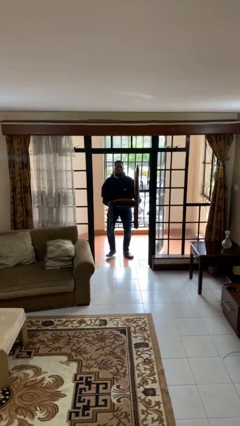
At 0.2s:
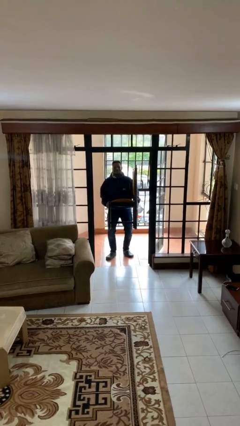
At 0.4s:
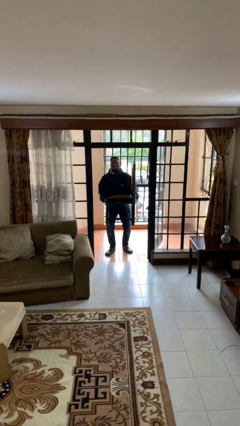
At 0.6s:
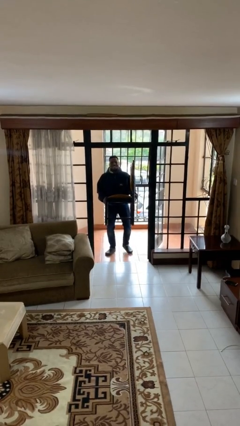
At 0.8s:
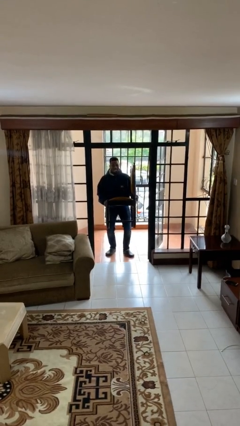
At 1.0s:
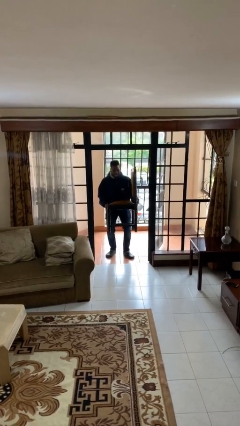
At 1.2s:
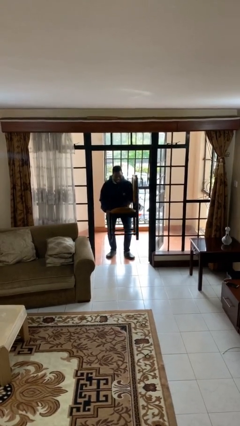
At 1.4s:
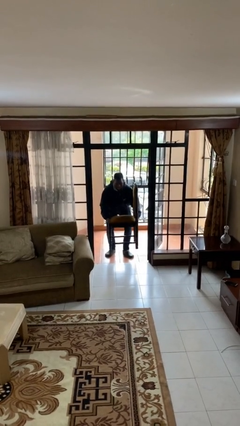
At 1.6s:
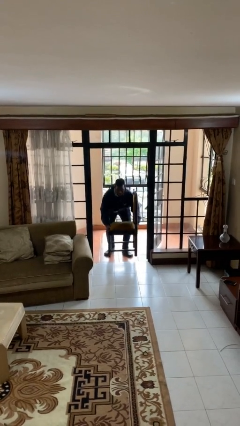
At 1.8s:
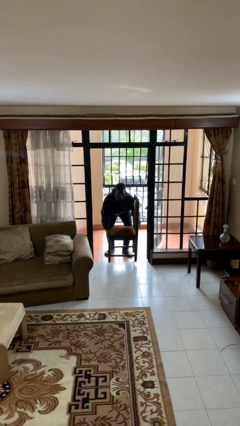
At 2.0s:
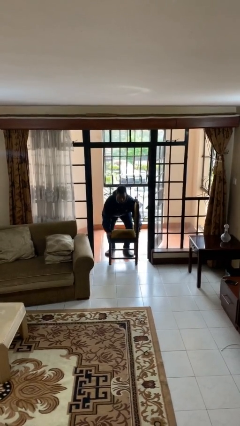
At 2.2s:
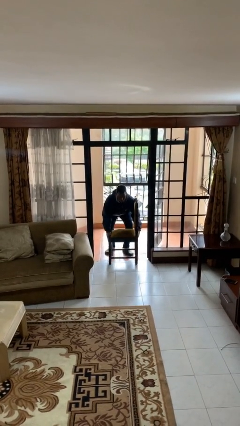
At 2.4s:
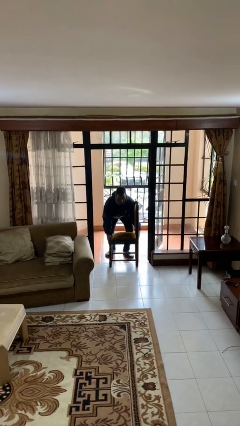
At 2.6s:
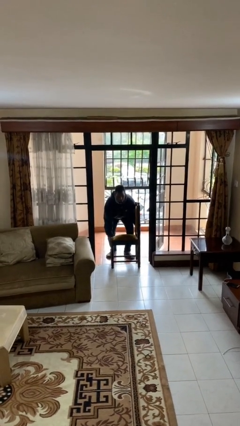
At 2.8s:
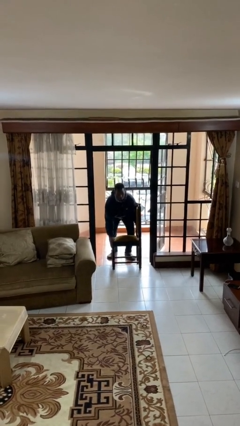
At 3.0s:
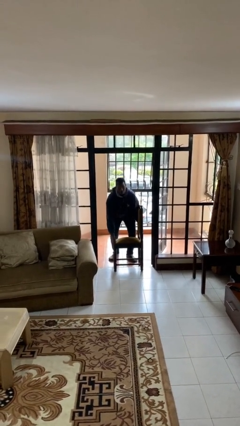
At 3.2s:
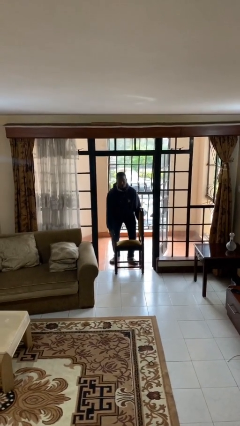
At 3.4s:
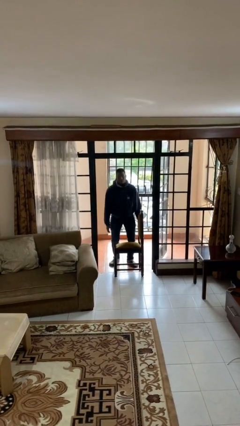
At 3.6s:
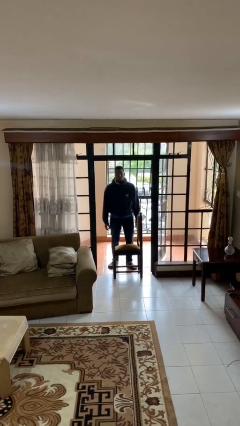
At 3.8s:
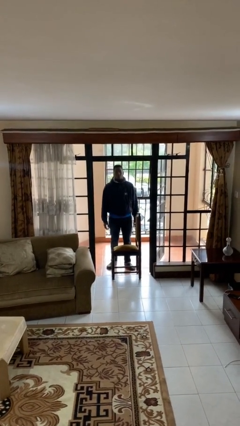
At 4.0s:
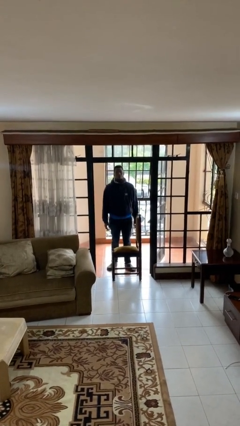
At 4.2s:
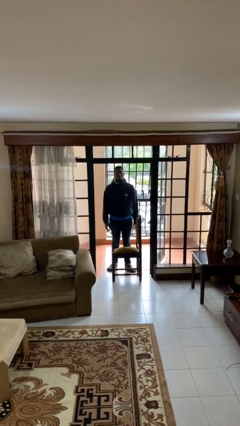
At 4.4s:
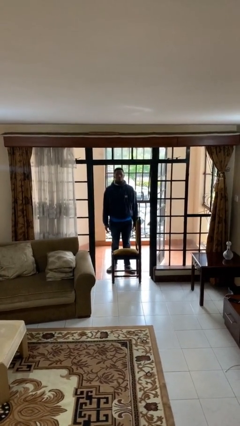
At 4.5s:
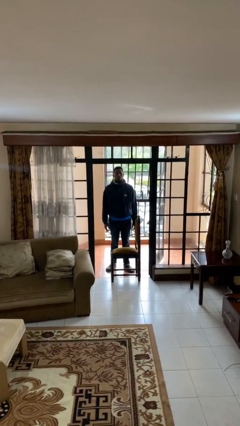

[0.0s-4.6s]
person puts down object on floor

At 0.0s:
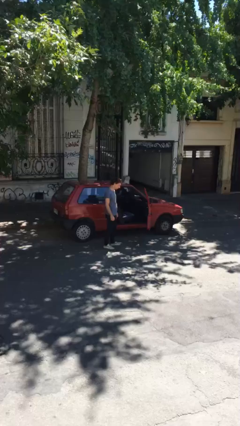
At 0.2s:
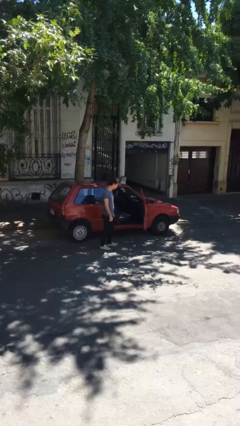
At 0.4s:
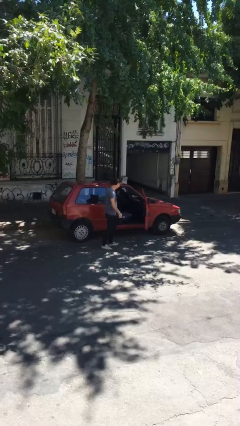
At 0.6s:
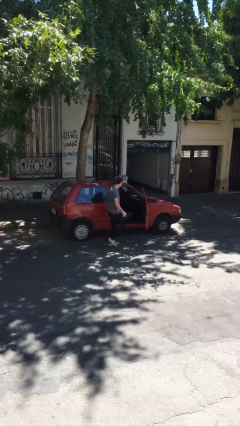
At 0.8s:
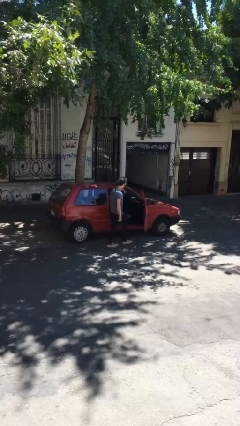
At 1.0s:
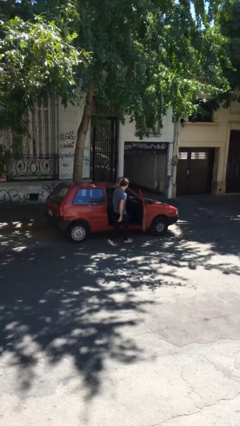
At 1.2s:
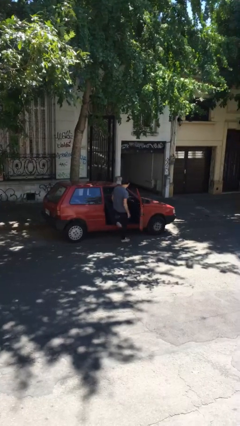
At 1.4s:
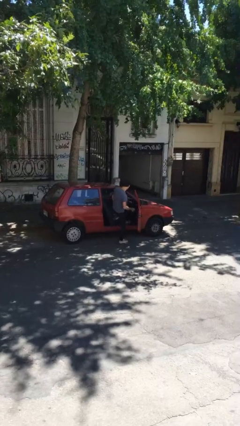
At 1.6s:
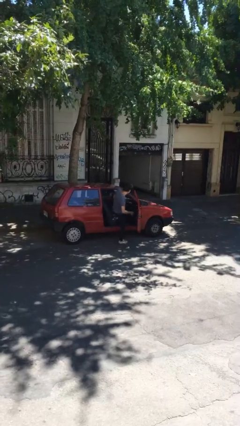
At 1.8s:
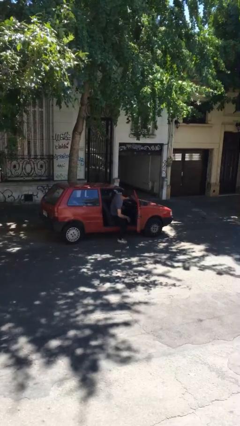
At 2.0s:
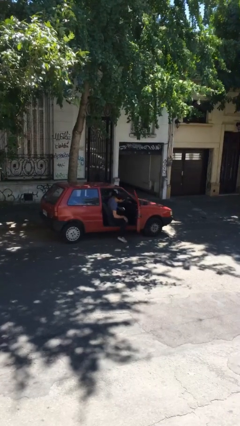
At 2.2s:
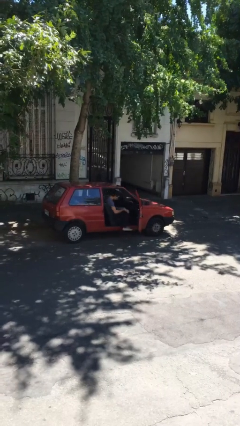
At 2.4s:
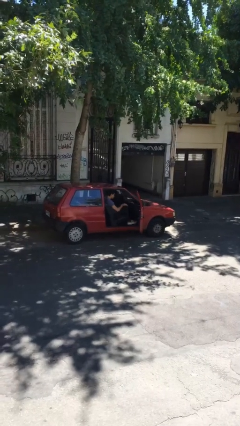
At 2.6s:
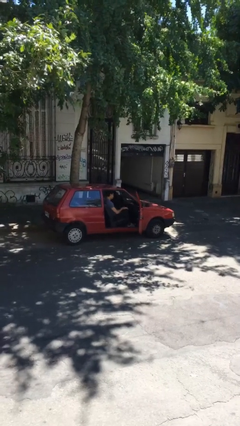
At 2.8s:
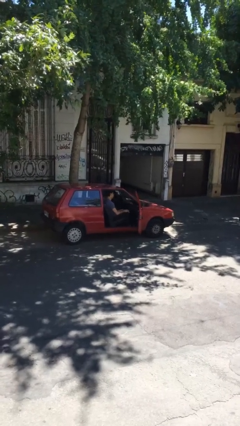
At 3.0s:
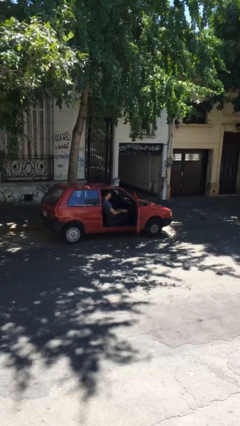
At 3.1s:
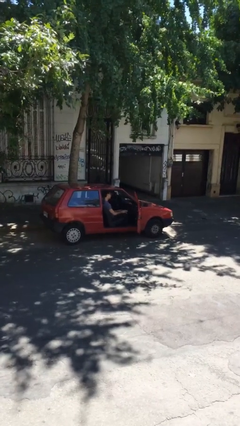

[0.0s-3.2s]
person enters car

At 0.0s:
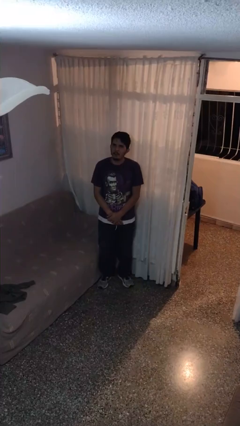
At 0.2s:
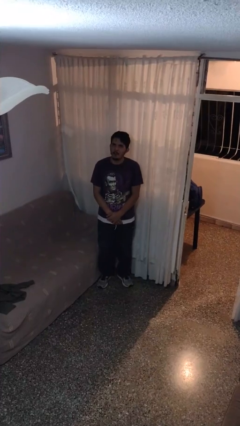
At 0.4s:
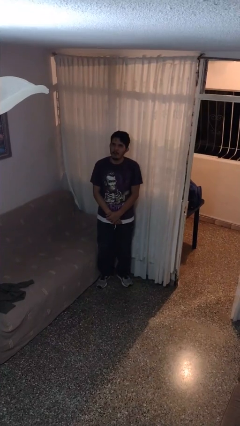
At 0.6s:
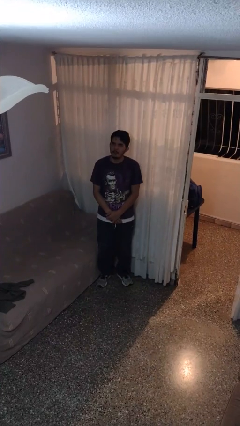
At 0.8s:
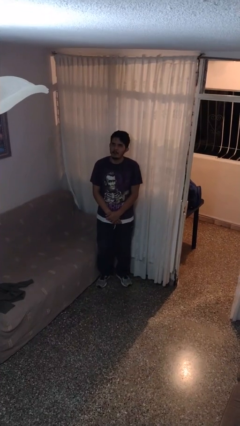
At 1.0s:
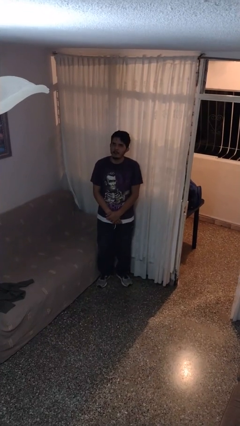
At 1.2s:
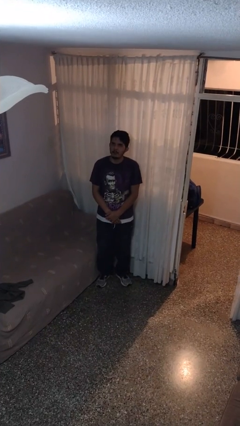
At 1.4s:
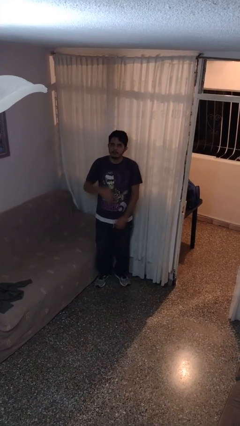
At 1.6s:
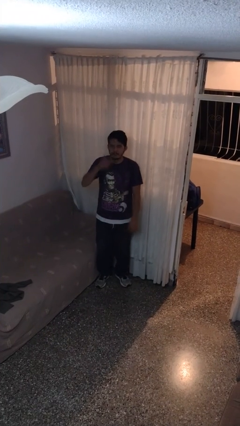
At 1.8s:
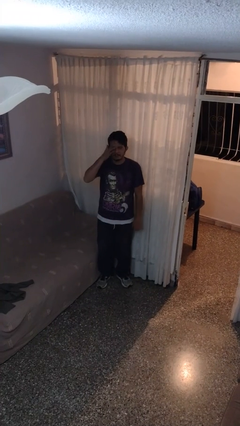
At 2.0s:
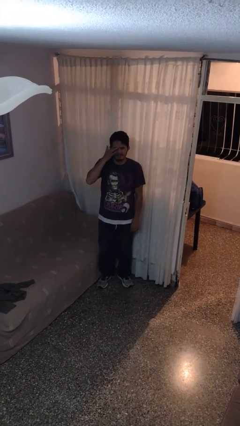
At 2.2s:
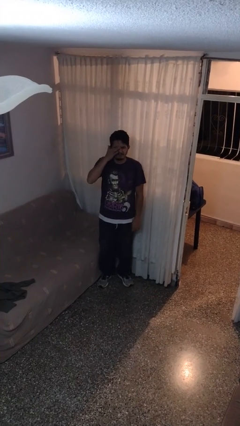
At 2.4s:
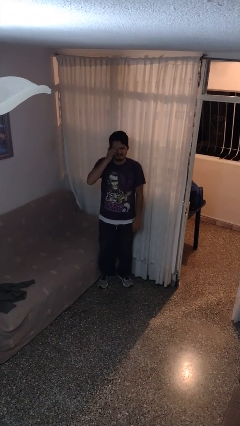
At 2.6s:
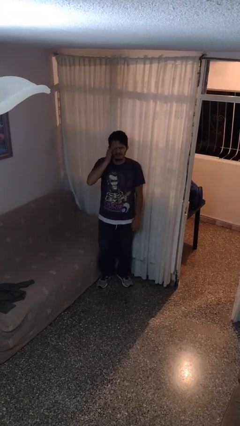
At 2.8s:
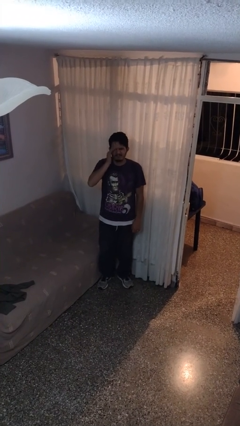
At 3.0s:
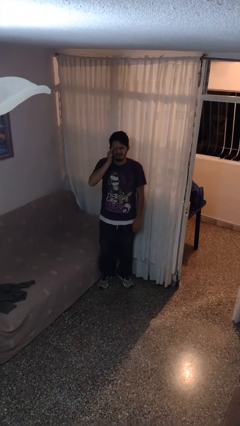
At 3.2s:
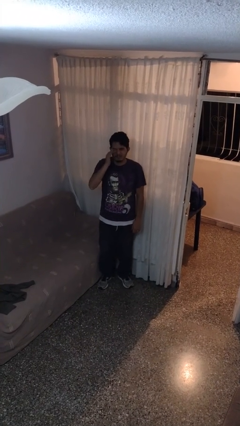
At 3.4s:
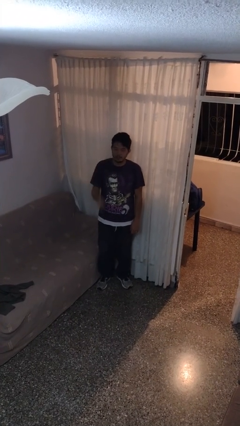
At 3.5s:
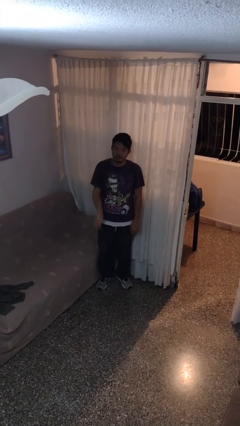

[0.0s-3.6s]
person rubs eyes

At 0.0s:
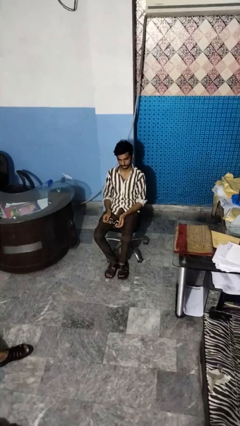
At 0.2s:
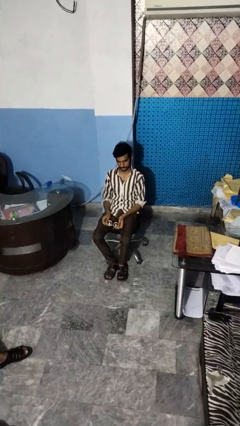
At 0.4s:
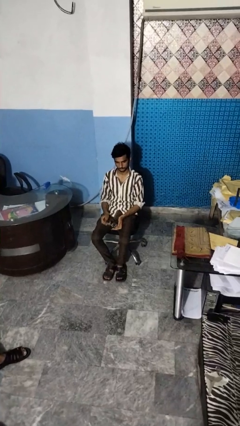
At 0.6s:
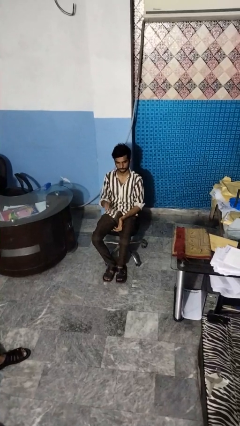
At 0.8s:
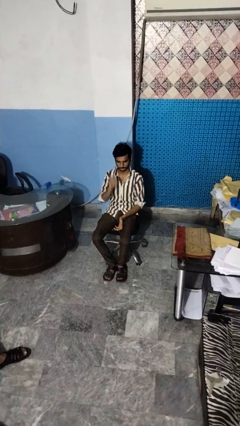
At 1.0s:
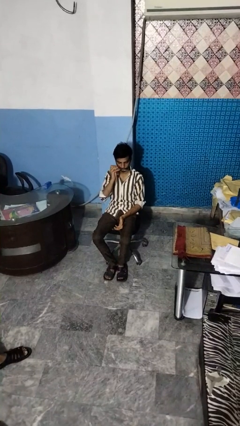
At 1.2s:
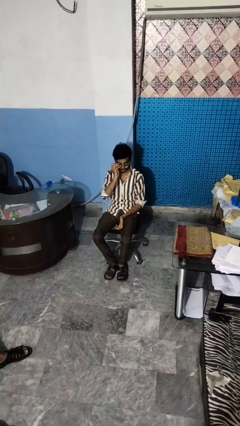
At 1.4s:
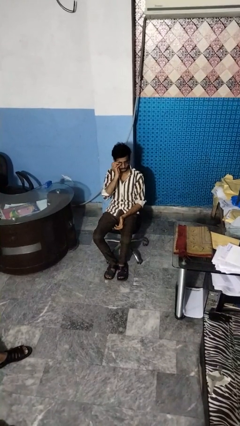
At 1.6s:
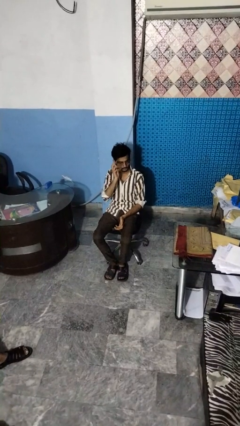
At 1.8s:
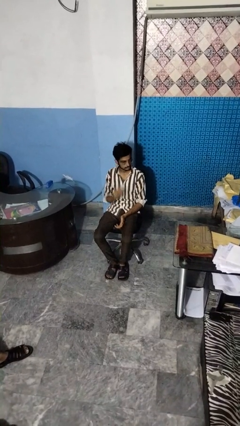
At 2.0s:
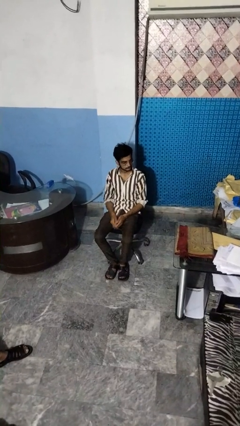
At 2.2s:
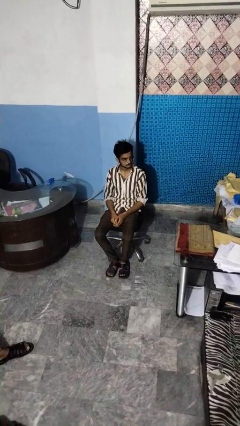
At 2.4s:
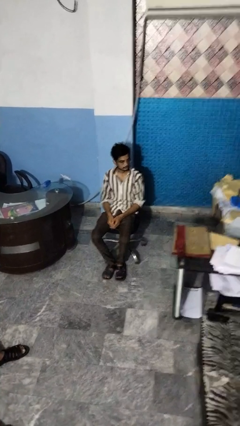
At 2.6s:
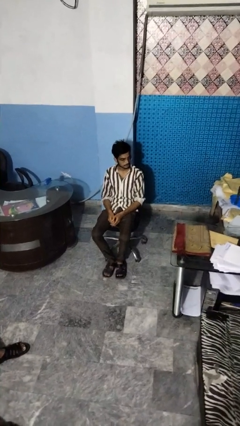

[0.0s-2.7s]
person puts on glasses

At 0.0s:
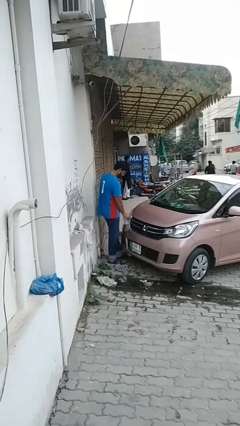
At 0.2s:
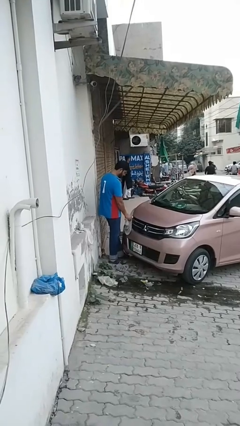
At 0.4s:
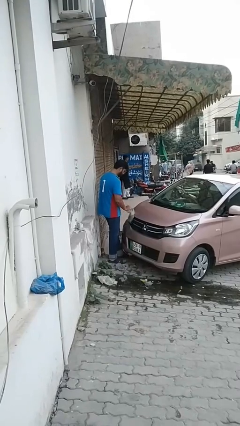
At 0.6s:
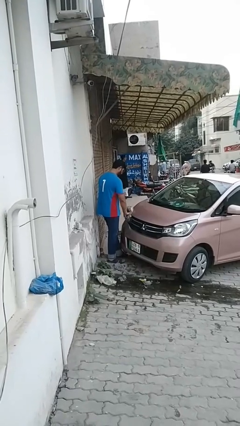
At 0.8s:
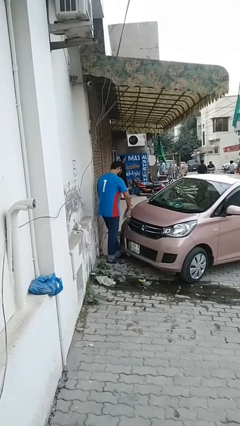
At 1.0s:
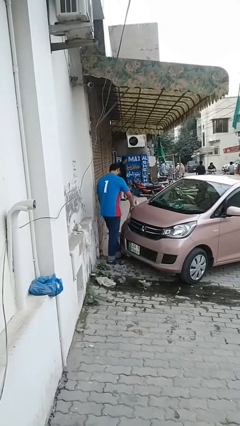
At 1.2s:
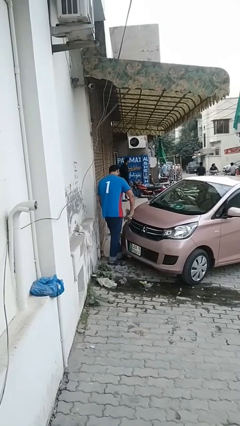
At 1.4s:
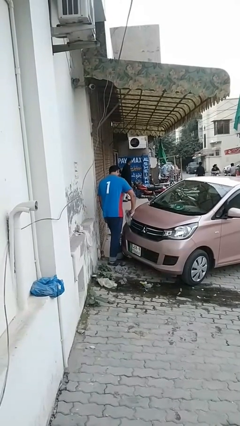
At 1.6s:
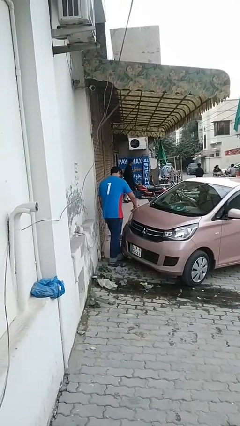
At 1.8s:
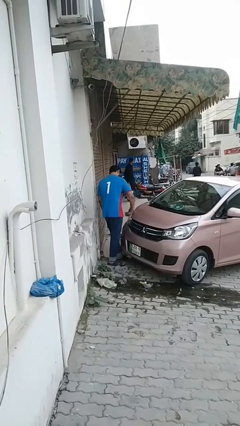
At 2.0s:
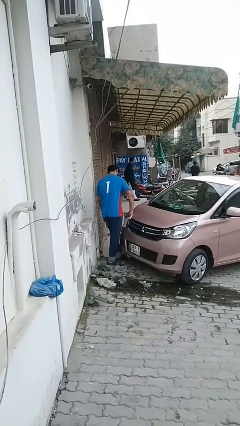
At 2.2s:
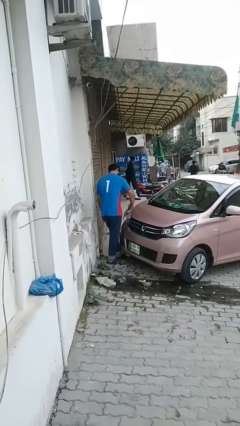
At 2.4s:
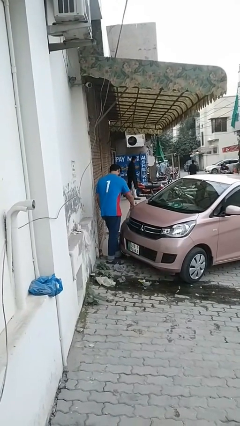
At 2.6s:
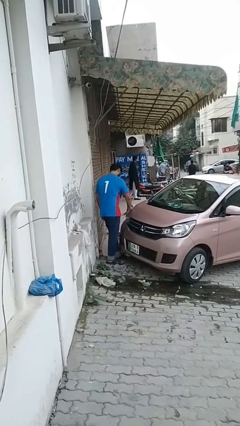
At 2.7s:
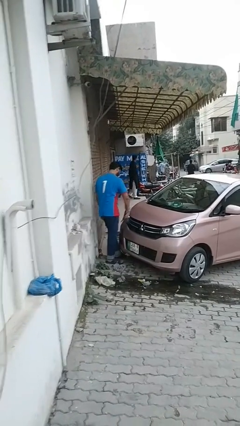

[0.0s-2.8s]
person polishes car with rag

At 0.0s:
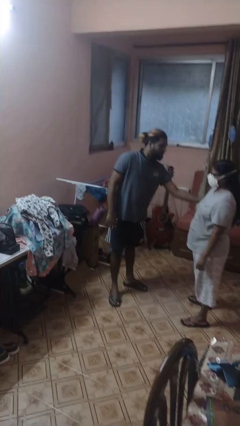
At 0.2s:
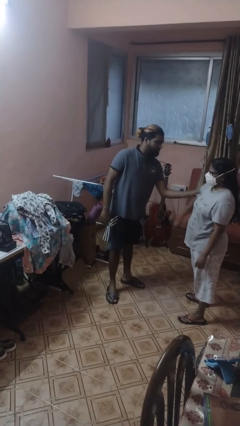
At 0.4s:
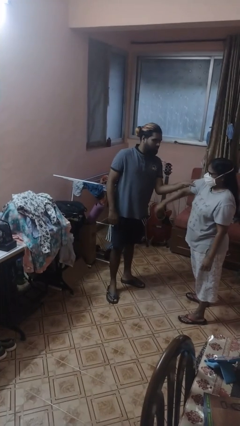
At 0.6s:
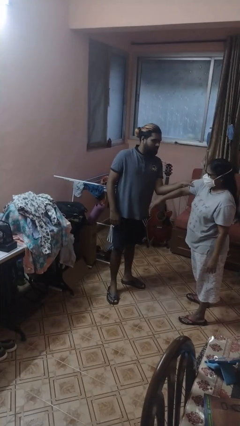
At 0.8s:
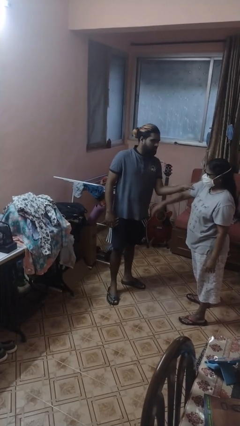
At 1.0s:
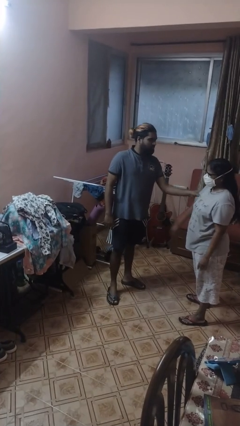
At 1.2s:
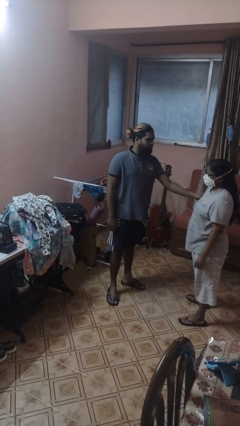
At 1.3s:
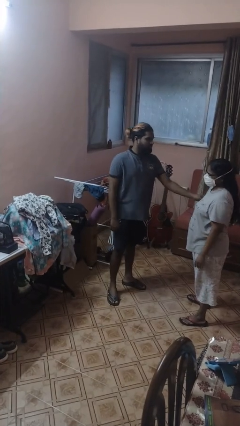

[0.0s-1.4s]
person grabs person by bicep
